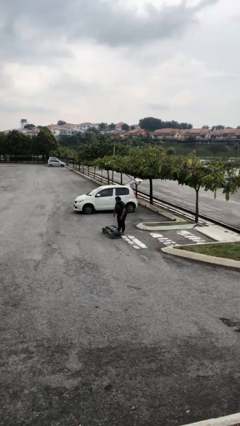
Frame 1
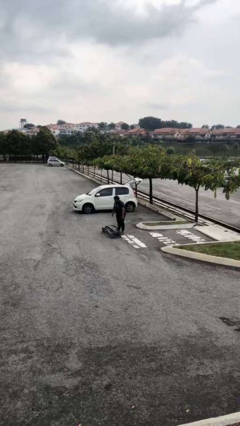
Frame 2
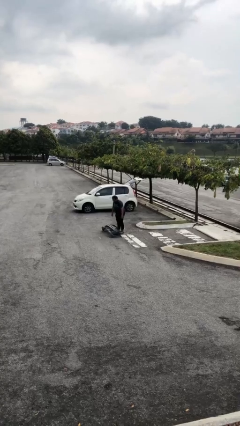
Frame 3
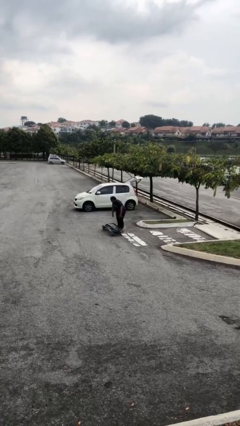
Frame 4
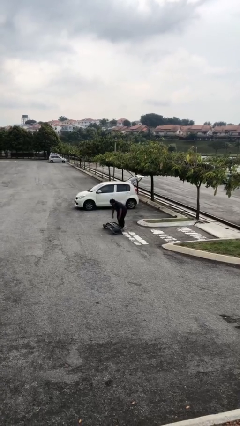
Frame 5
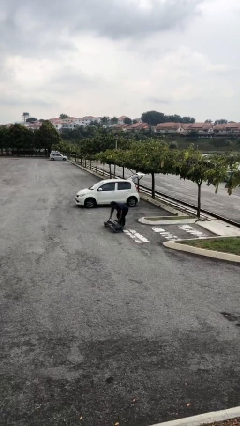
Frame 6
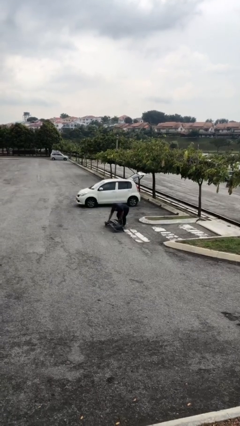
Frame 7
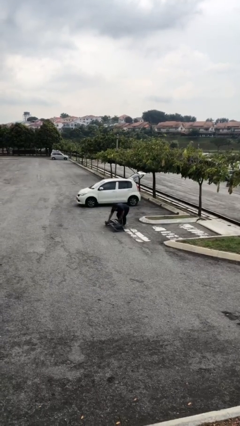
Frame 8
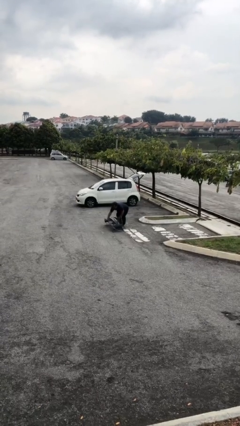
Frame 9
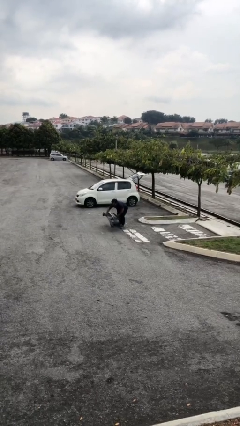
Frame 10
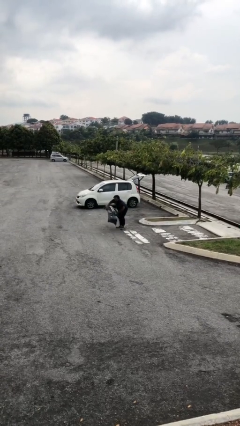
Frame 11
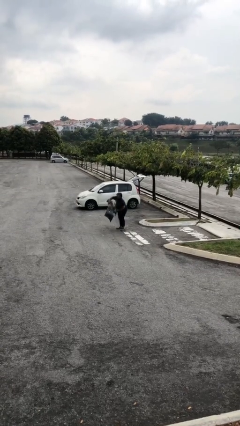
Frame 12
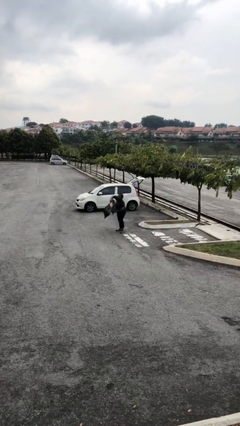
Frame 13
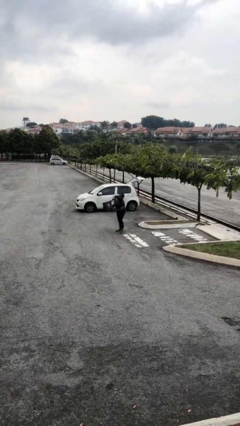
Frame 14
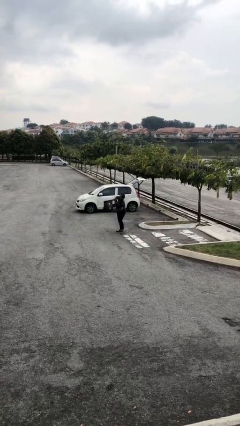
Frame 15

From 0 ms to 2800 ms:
person picks up object from floor

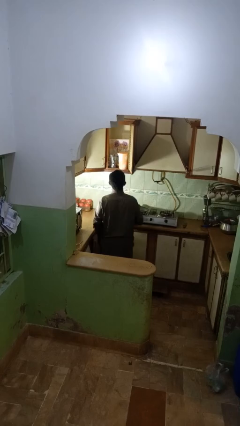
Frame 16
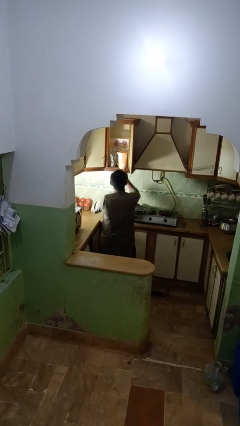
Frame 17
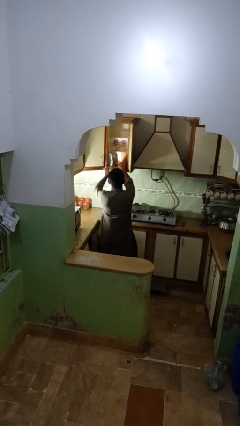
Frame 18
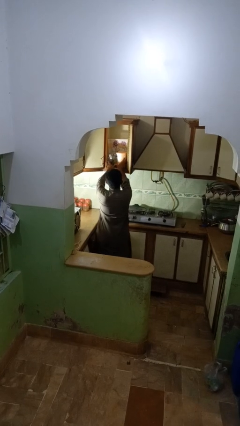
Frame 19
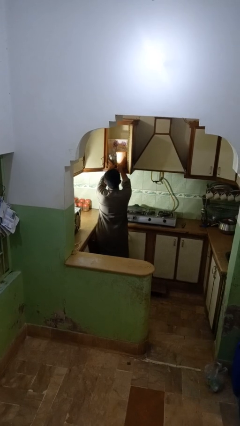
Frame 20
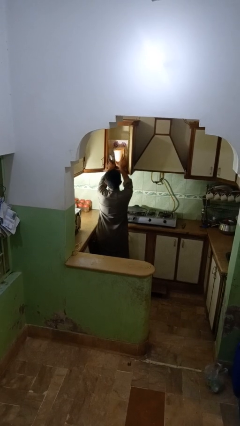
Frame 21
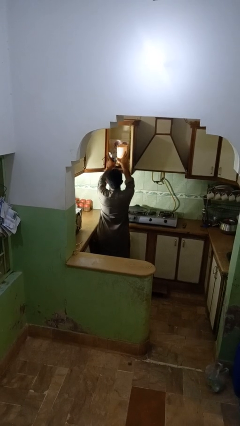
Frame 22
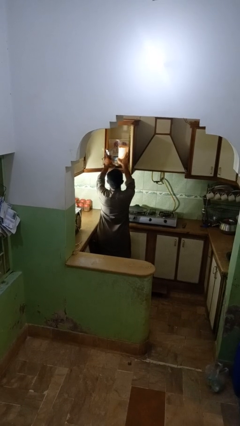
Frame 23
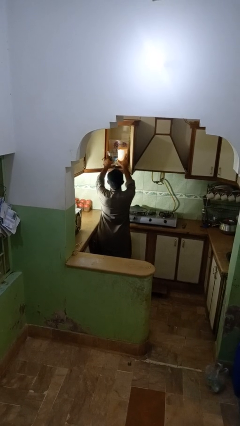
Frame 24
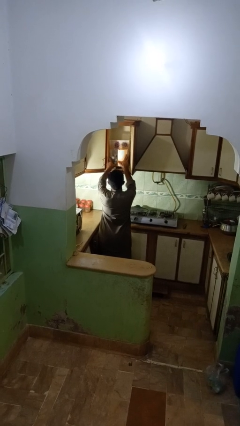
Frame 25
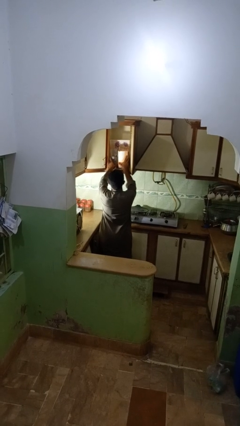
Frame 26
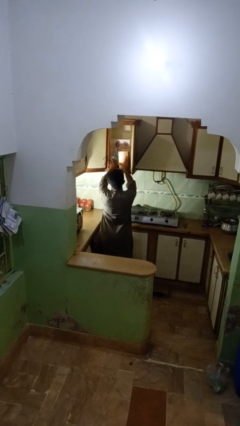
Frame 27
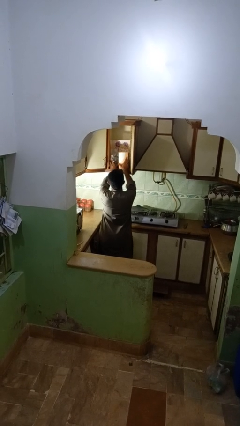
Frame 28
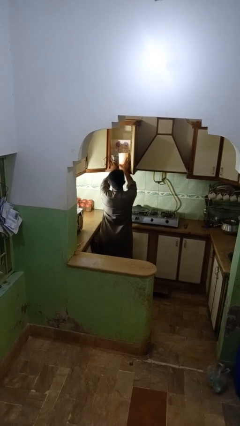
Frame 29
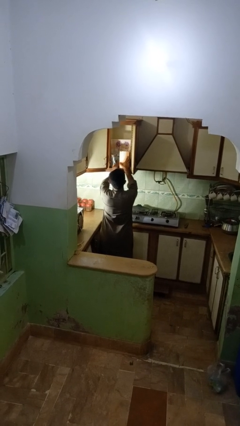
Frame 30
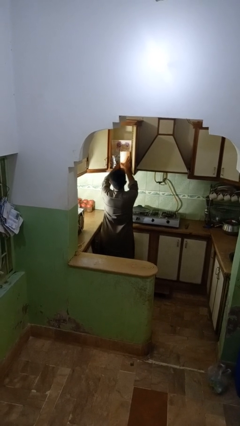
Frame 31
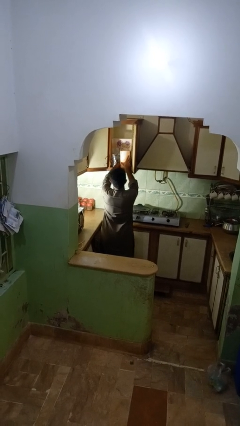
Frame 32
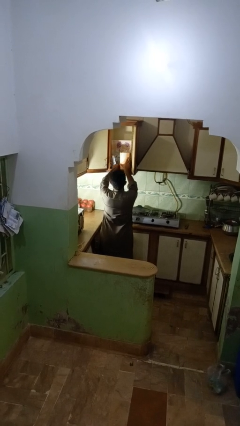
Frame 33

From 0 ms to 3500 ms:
person searches in kitchen drawer

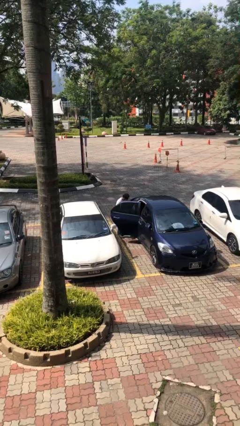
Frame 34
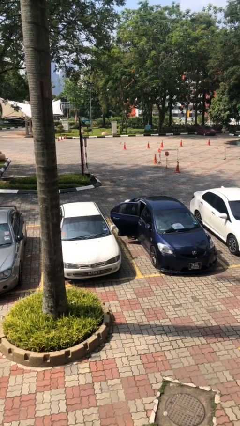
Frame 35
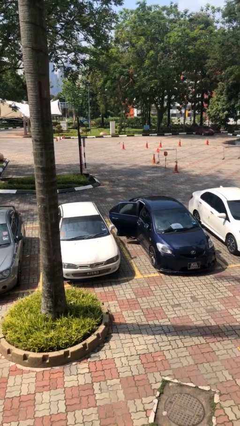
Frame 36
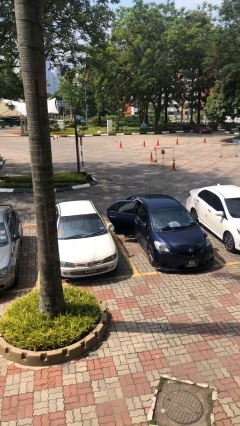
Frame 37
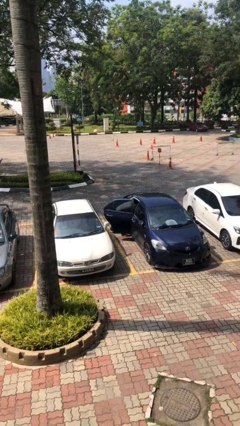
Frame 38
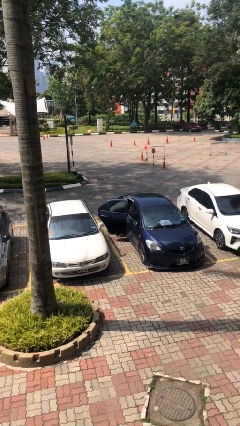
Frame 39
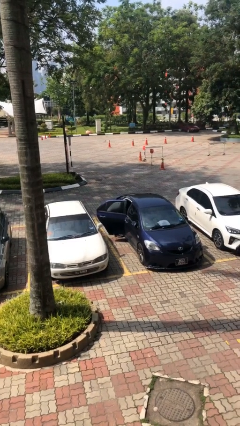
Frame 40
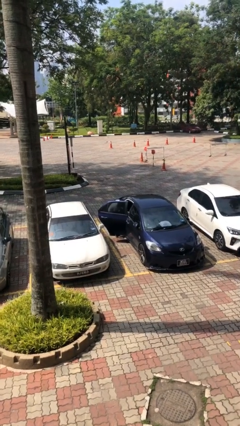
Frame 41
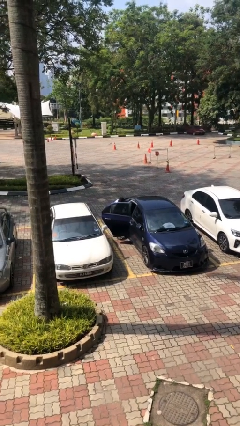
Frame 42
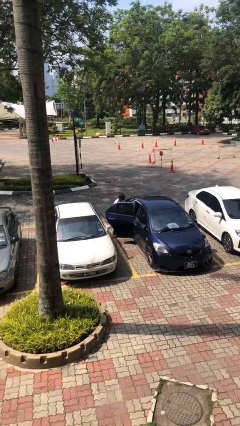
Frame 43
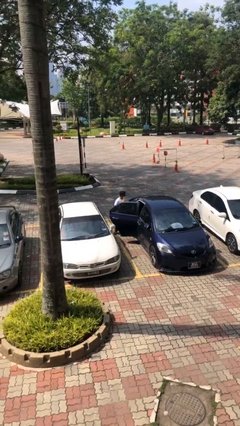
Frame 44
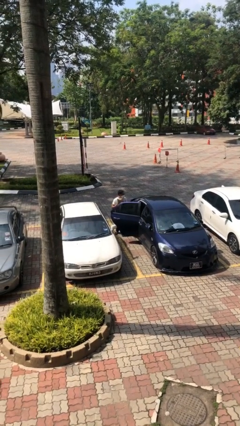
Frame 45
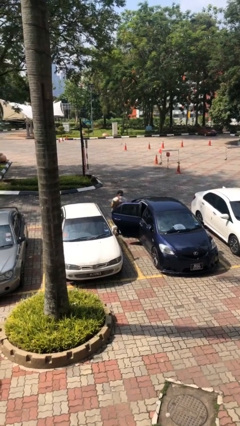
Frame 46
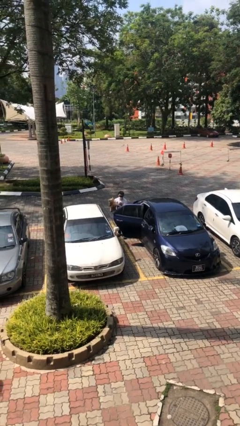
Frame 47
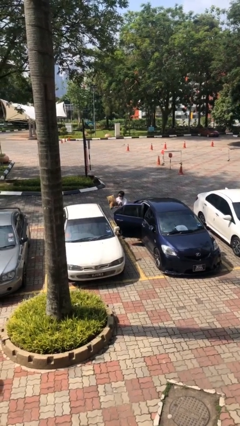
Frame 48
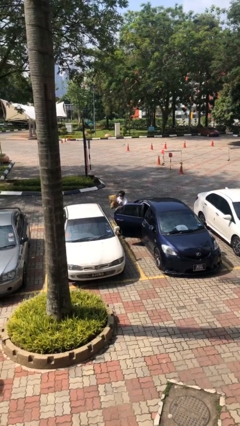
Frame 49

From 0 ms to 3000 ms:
person unloads car

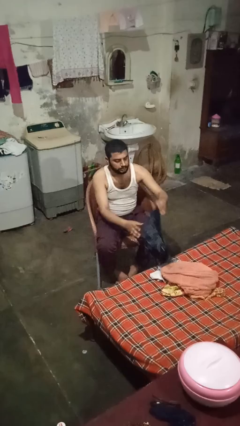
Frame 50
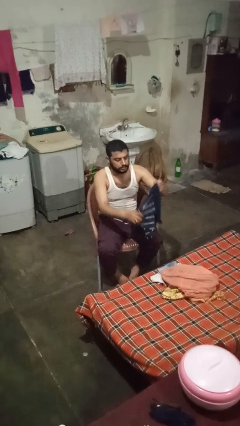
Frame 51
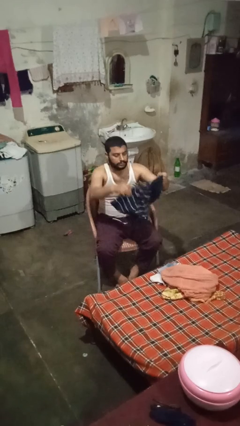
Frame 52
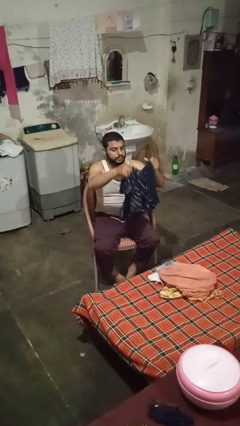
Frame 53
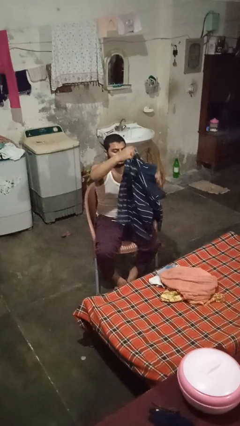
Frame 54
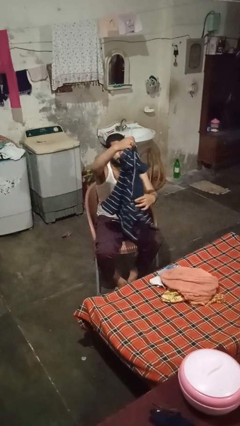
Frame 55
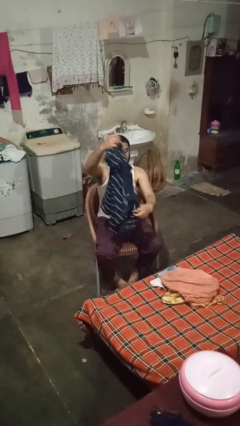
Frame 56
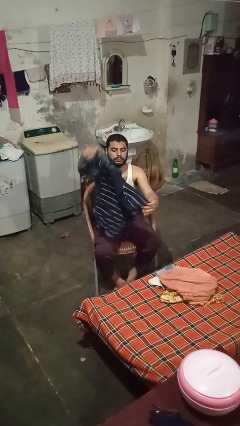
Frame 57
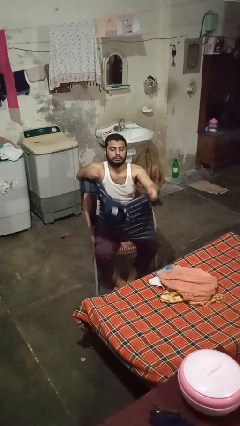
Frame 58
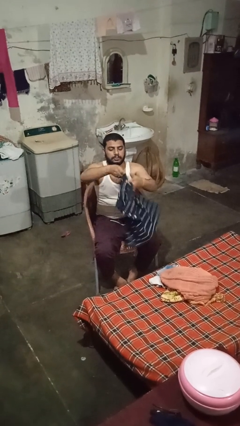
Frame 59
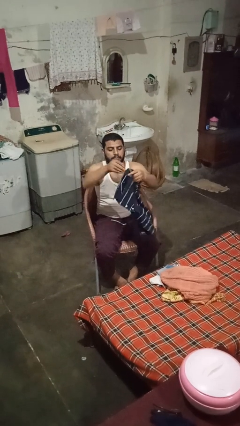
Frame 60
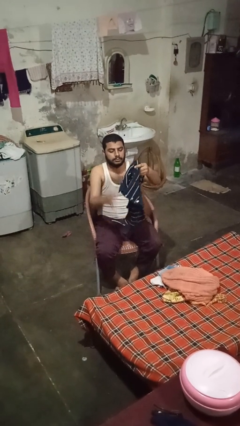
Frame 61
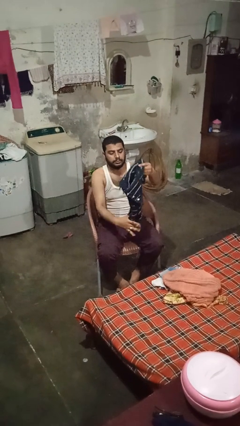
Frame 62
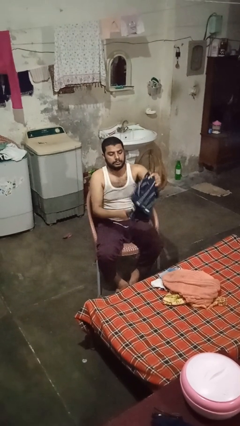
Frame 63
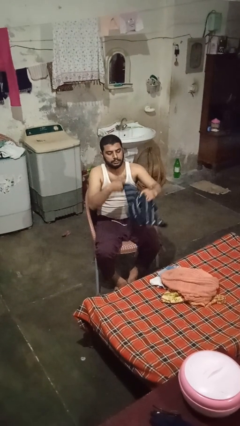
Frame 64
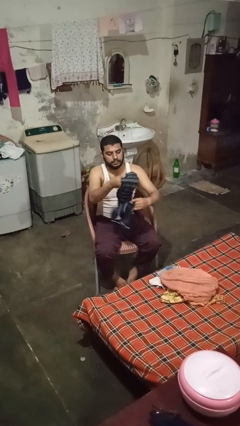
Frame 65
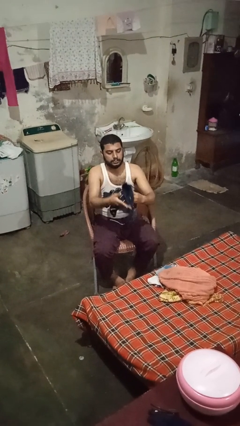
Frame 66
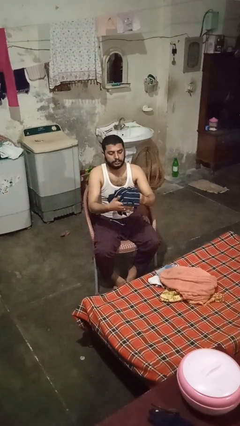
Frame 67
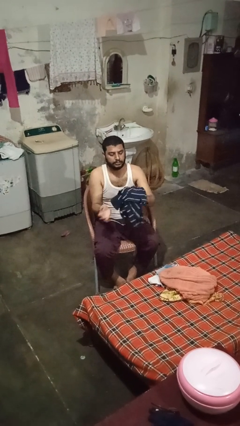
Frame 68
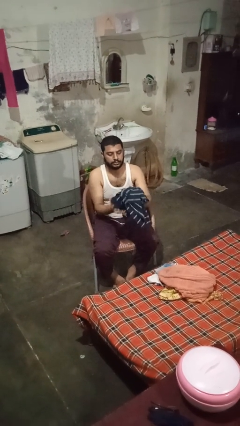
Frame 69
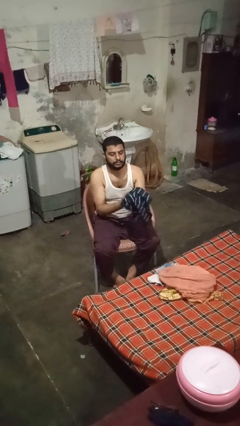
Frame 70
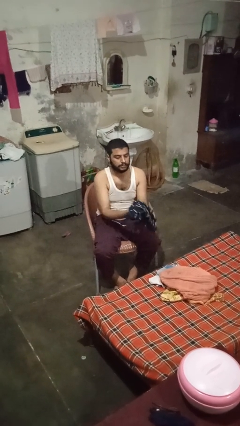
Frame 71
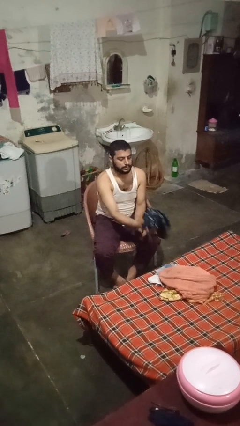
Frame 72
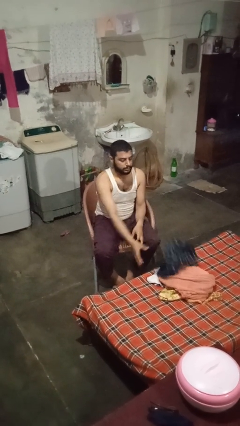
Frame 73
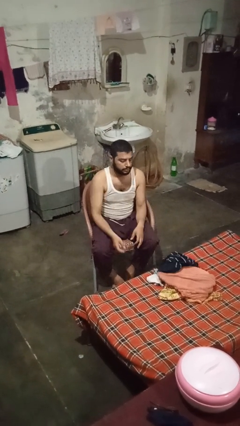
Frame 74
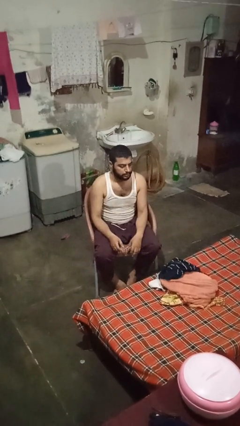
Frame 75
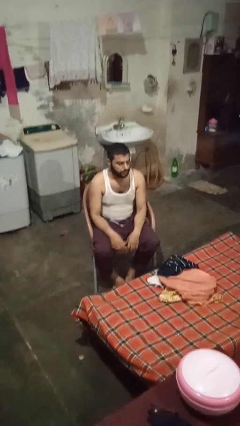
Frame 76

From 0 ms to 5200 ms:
person folds shirt

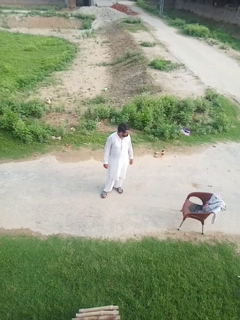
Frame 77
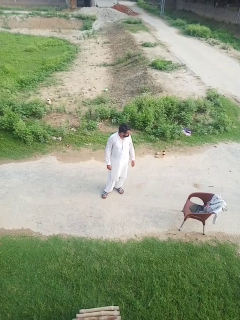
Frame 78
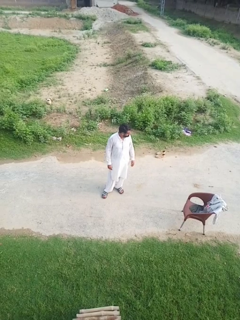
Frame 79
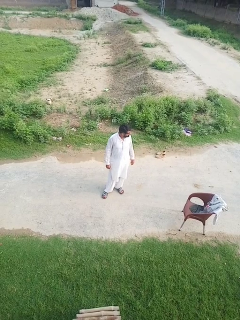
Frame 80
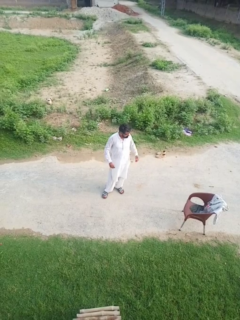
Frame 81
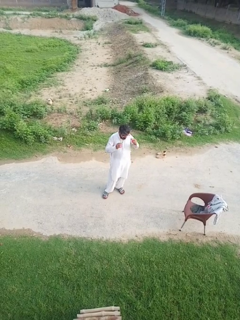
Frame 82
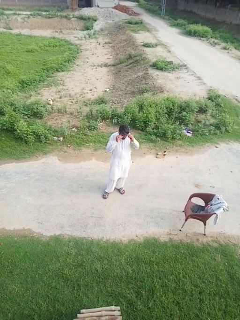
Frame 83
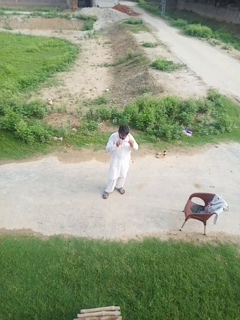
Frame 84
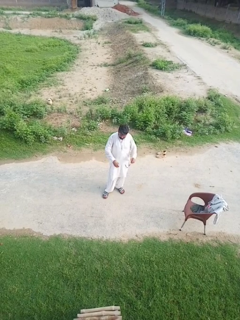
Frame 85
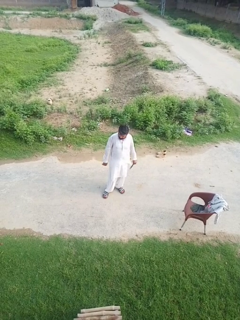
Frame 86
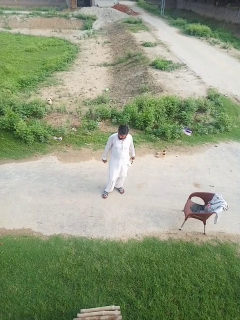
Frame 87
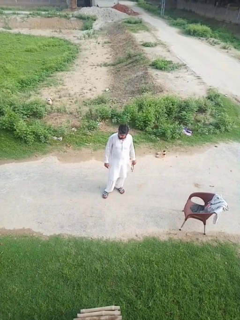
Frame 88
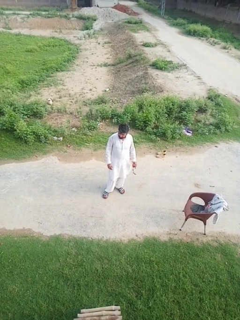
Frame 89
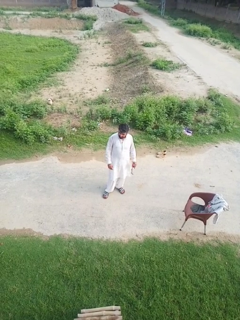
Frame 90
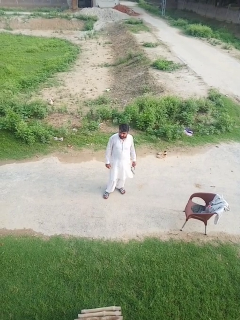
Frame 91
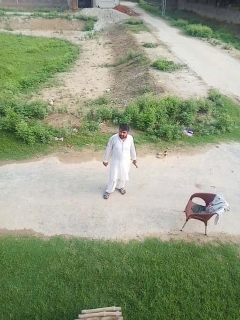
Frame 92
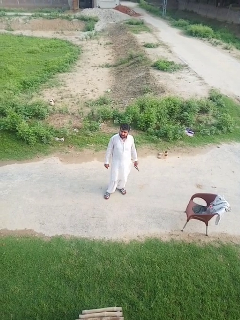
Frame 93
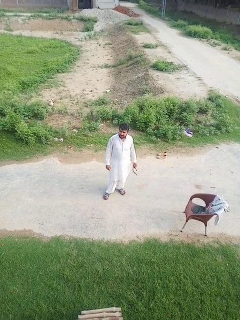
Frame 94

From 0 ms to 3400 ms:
person takes off glasses

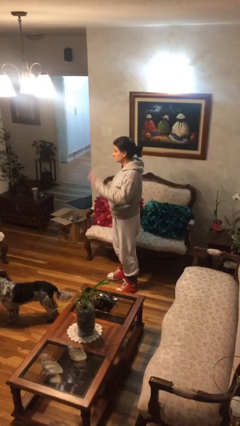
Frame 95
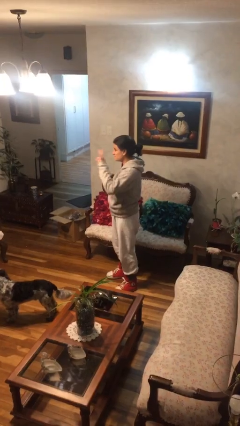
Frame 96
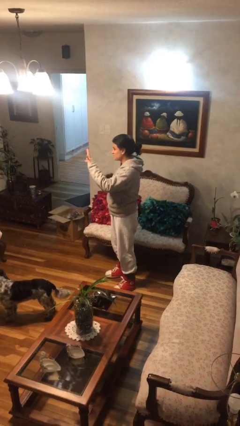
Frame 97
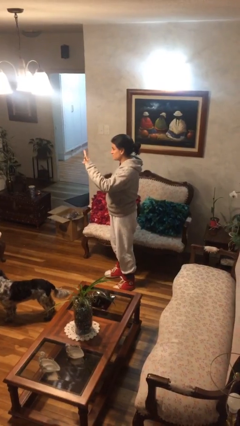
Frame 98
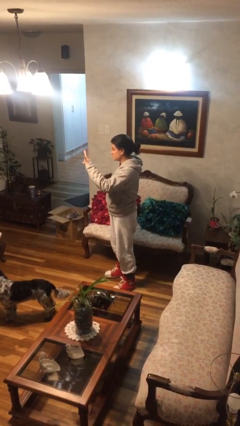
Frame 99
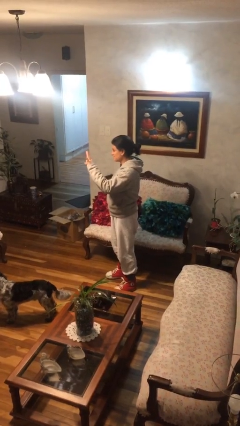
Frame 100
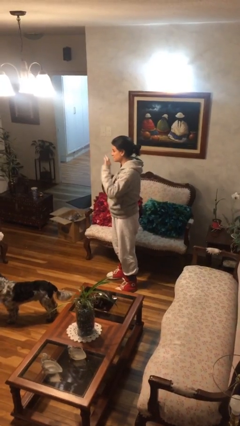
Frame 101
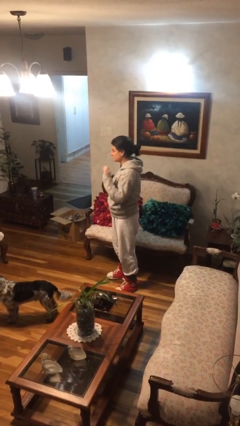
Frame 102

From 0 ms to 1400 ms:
person gestures number three
